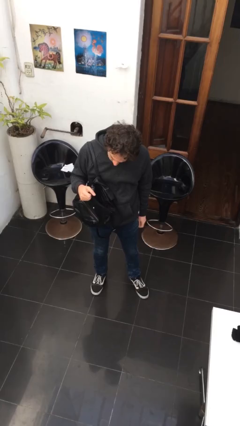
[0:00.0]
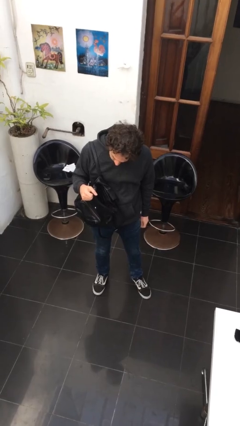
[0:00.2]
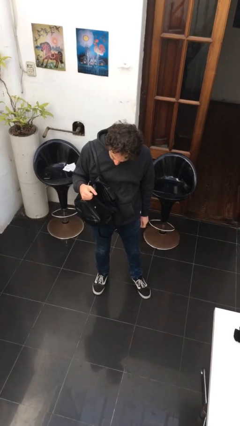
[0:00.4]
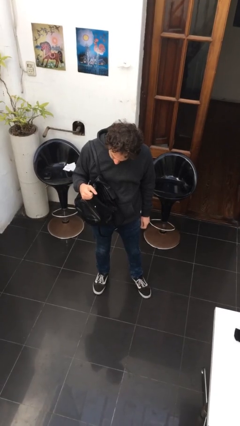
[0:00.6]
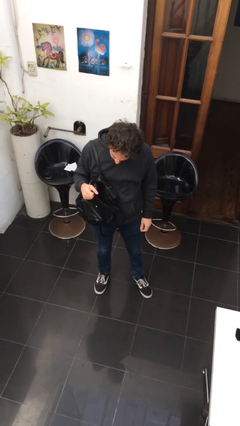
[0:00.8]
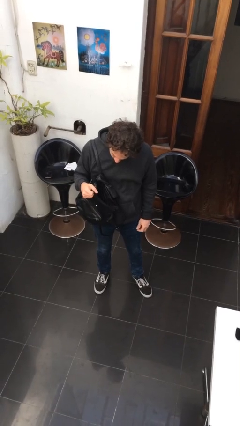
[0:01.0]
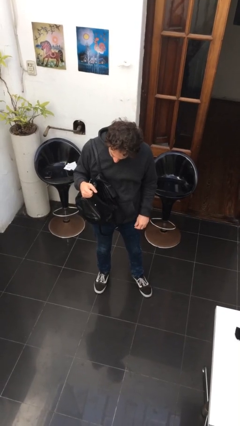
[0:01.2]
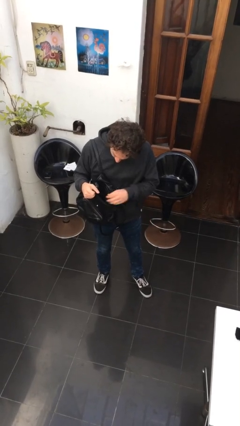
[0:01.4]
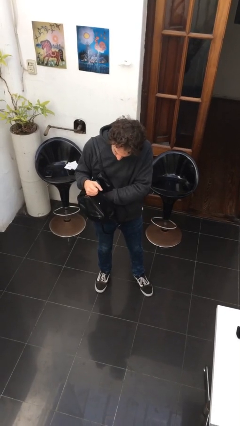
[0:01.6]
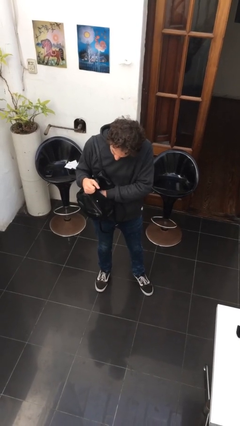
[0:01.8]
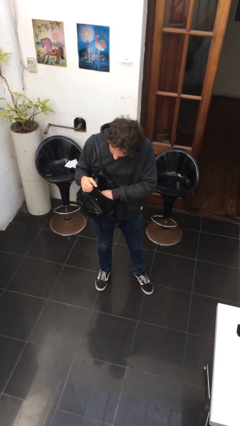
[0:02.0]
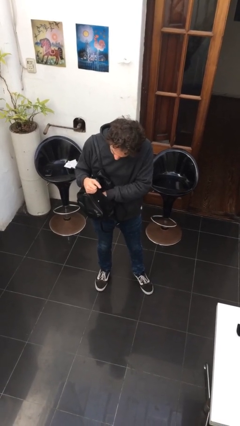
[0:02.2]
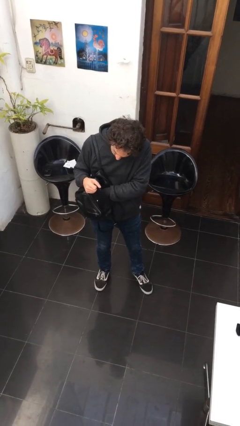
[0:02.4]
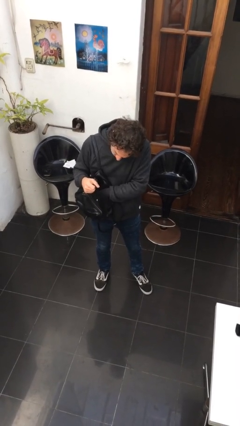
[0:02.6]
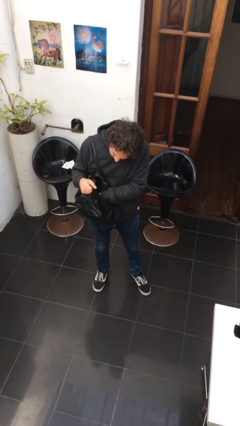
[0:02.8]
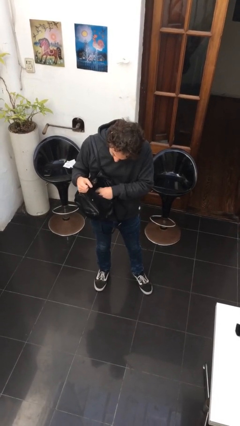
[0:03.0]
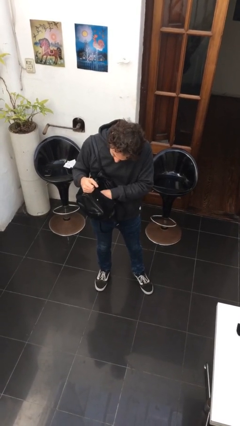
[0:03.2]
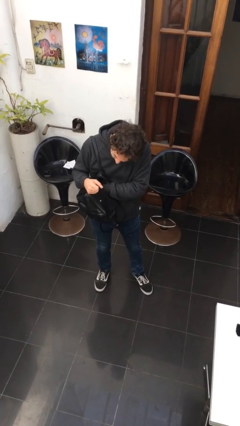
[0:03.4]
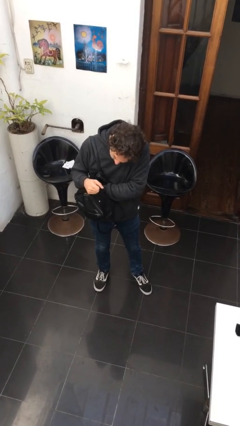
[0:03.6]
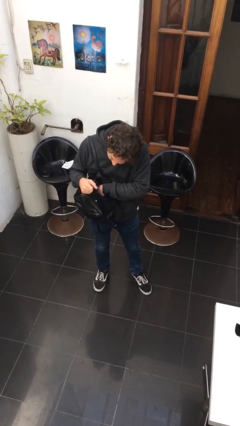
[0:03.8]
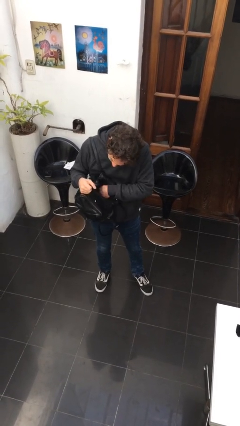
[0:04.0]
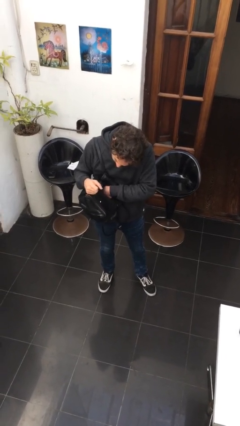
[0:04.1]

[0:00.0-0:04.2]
person searches in purse

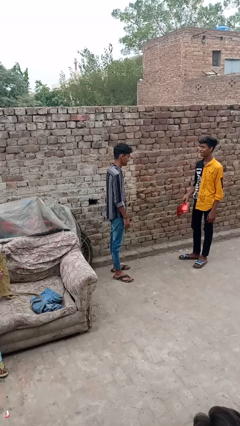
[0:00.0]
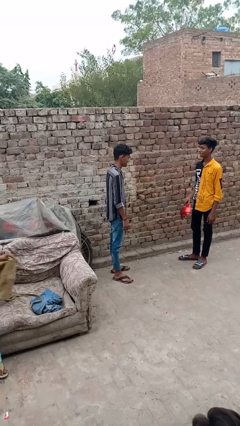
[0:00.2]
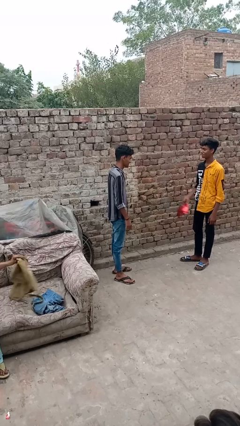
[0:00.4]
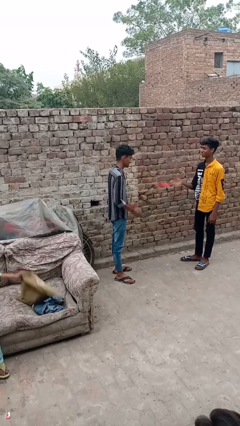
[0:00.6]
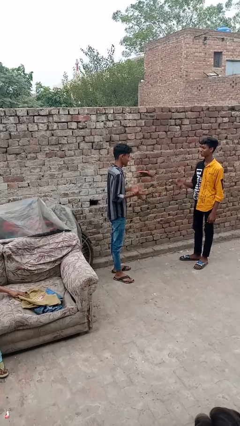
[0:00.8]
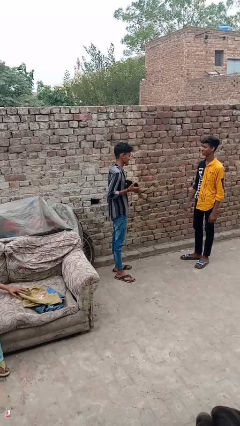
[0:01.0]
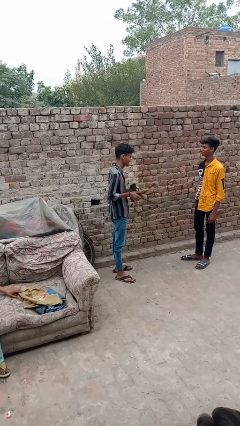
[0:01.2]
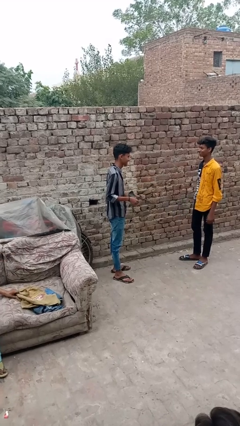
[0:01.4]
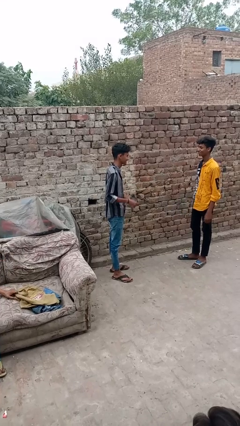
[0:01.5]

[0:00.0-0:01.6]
person catches object from person

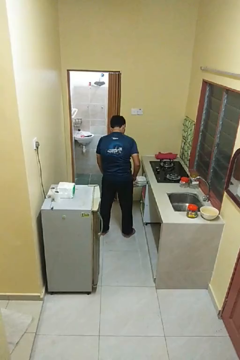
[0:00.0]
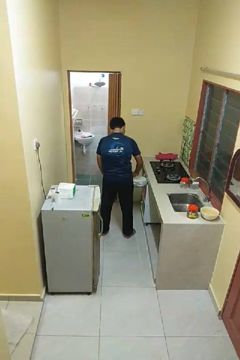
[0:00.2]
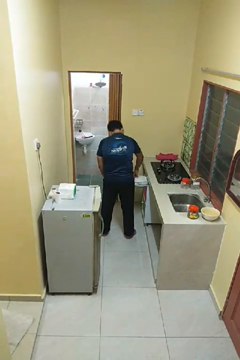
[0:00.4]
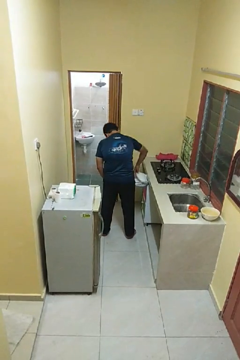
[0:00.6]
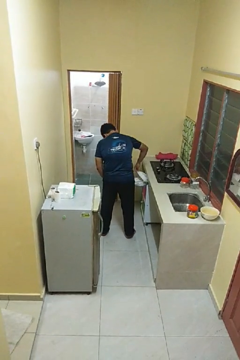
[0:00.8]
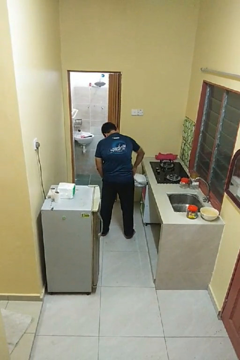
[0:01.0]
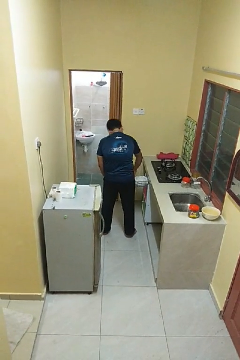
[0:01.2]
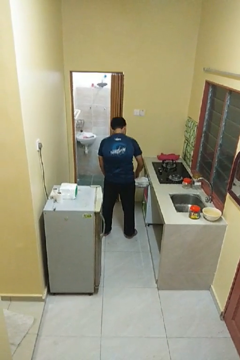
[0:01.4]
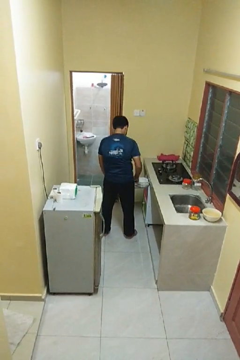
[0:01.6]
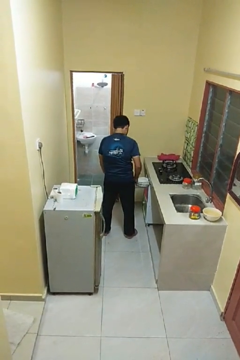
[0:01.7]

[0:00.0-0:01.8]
person searches in kitchen drawer

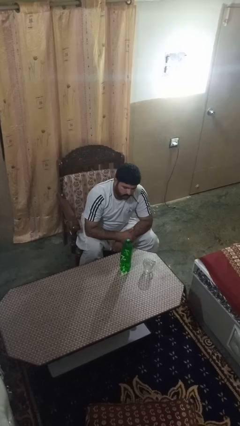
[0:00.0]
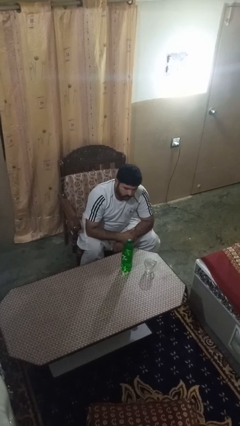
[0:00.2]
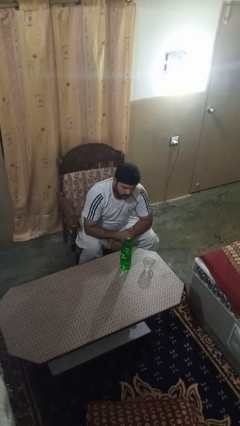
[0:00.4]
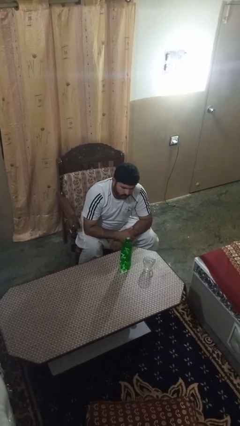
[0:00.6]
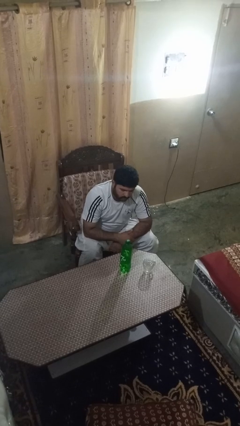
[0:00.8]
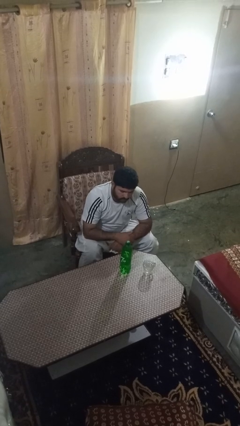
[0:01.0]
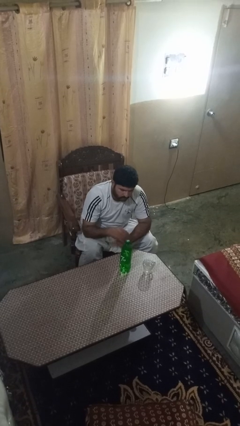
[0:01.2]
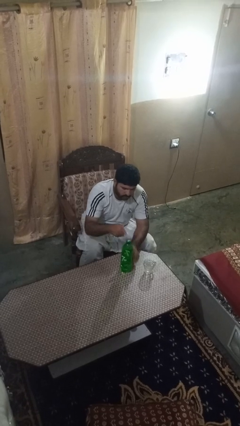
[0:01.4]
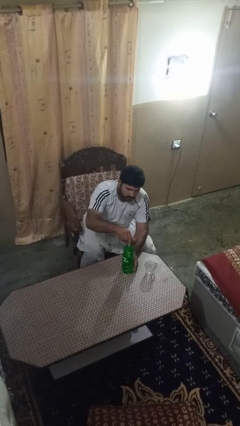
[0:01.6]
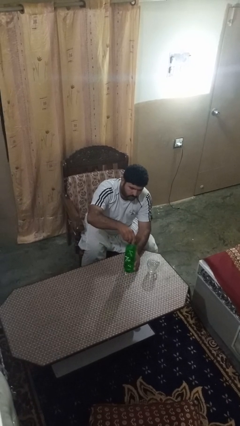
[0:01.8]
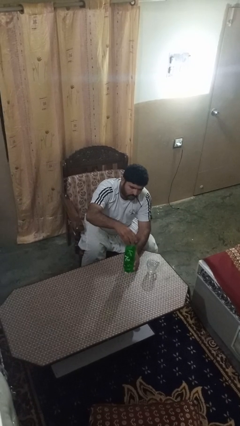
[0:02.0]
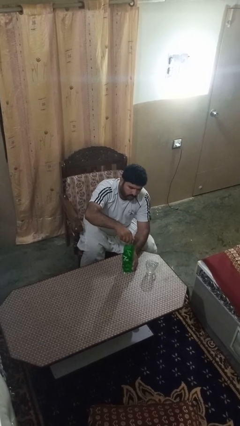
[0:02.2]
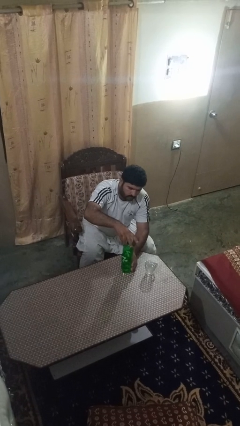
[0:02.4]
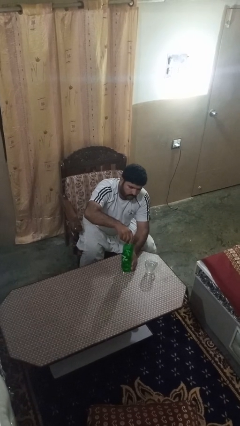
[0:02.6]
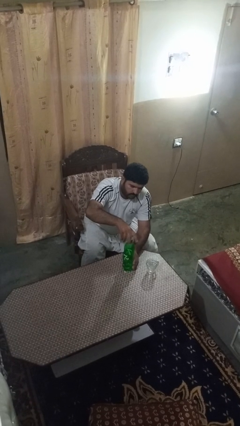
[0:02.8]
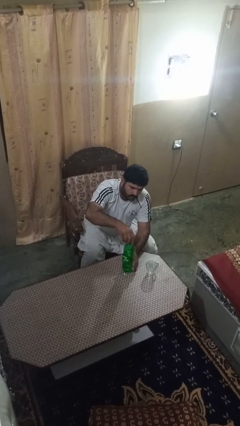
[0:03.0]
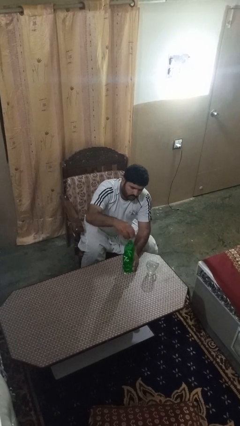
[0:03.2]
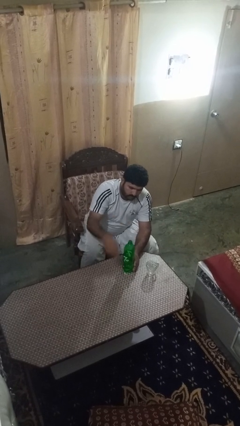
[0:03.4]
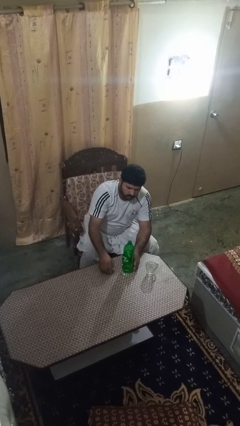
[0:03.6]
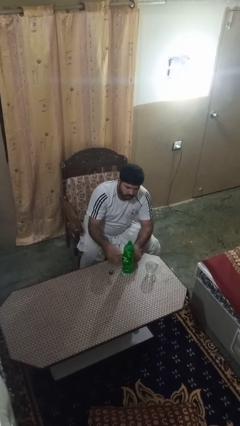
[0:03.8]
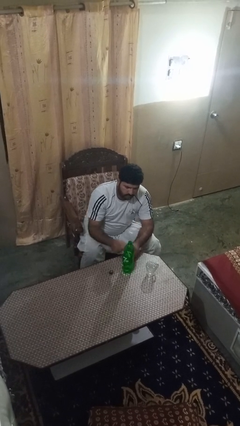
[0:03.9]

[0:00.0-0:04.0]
person unscrews lid from bottle

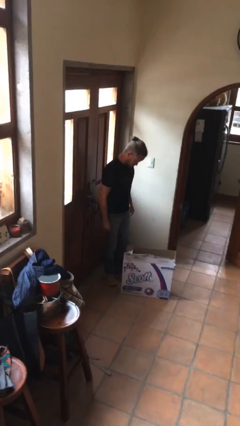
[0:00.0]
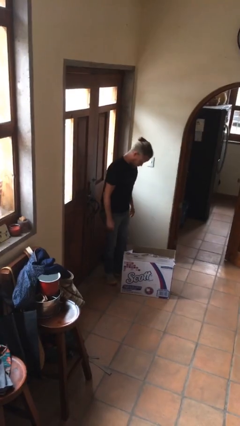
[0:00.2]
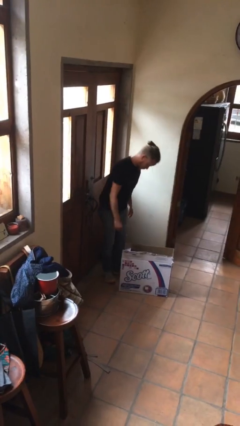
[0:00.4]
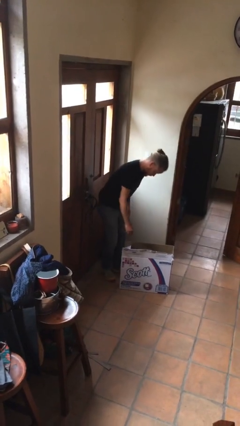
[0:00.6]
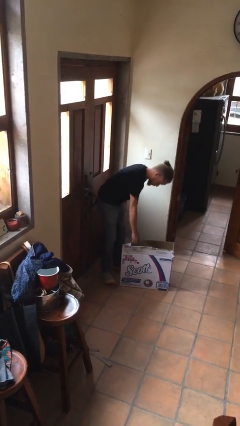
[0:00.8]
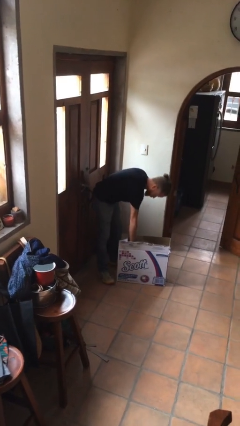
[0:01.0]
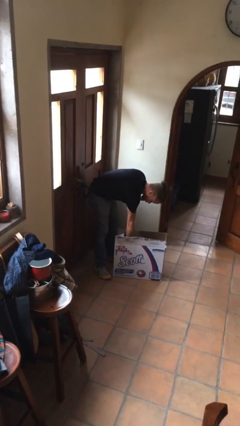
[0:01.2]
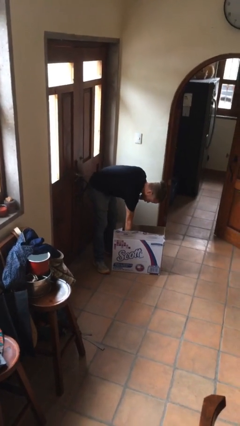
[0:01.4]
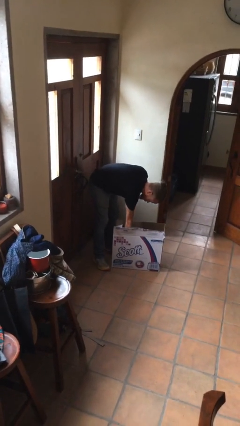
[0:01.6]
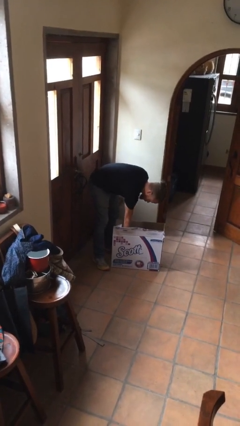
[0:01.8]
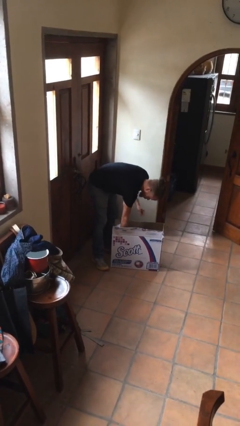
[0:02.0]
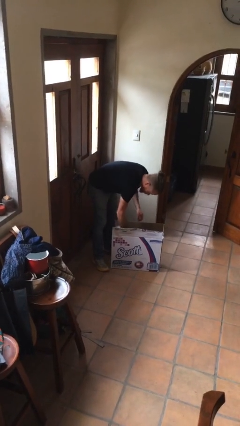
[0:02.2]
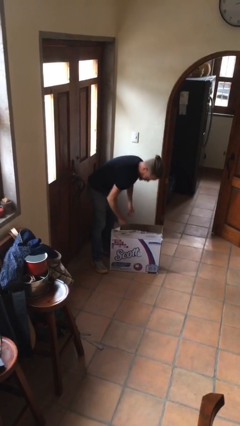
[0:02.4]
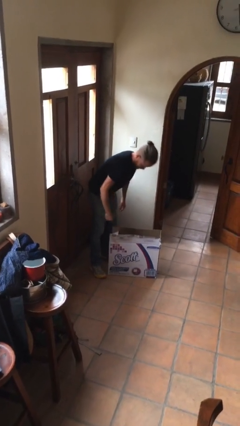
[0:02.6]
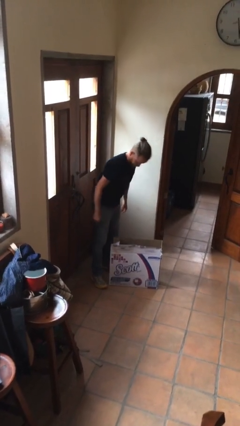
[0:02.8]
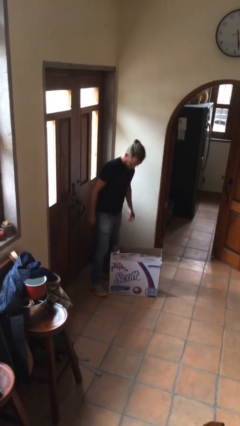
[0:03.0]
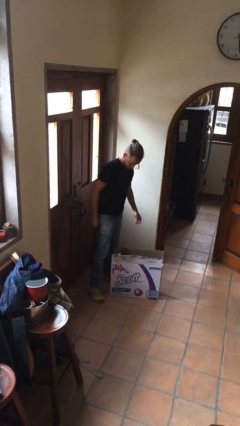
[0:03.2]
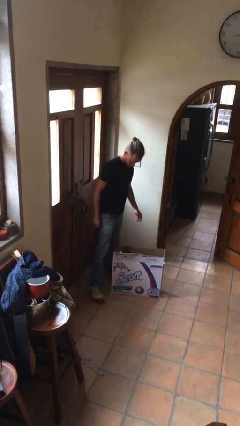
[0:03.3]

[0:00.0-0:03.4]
person searches in box

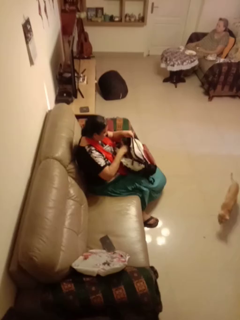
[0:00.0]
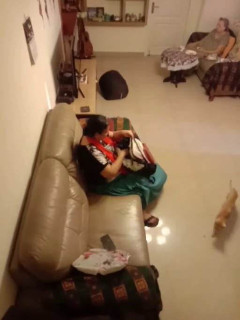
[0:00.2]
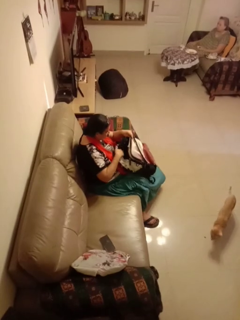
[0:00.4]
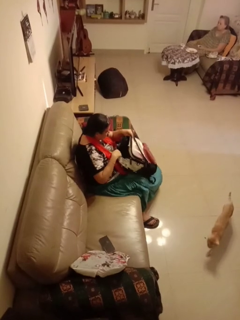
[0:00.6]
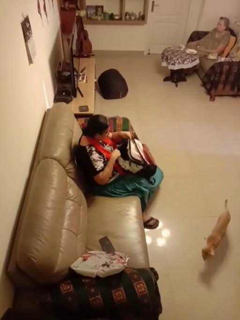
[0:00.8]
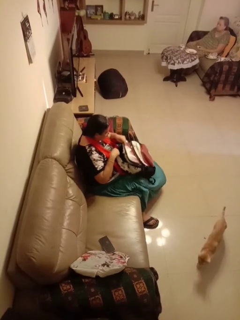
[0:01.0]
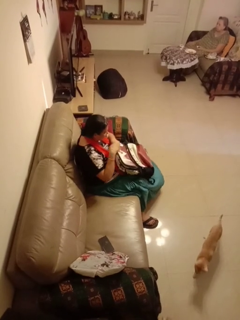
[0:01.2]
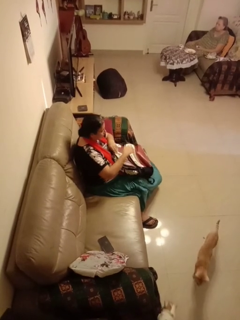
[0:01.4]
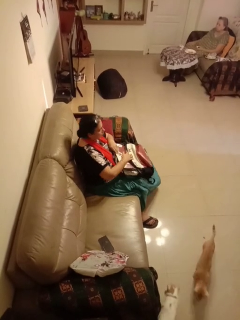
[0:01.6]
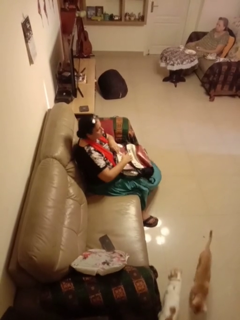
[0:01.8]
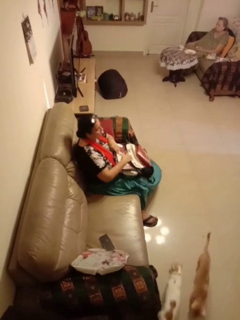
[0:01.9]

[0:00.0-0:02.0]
person puts object into backpack

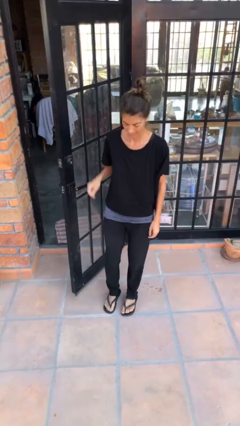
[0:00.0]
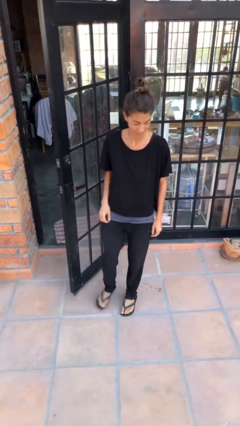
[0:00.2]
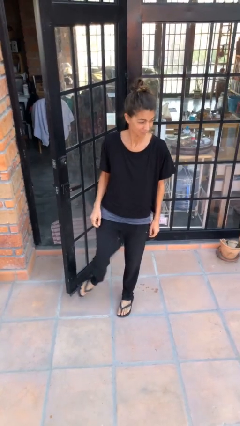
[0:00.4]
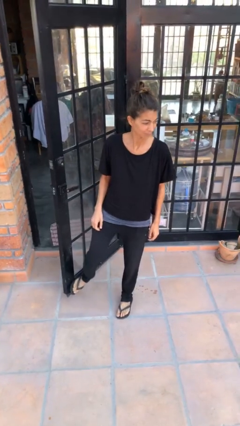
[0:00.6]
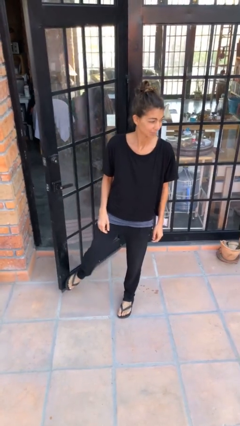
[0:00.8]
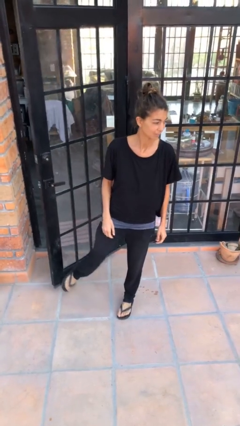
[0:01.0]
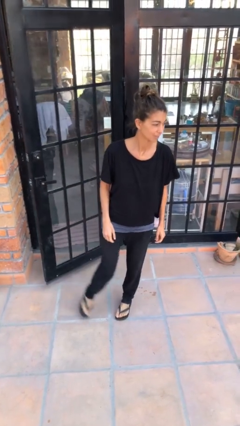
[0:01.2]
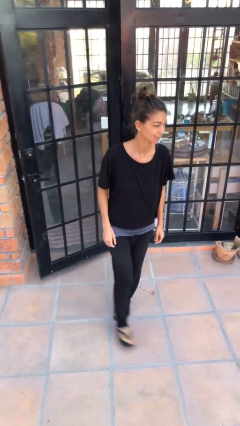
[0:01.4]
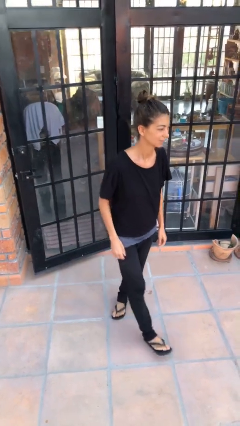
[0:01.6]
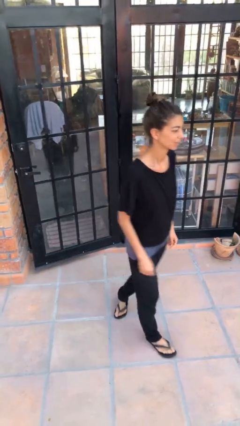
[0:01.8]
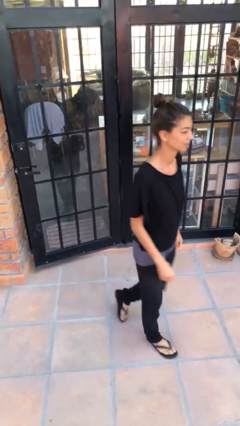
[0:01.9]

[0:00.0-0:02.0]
person closes door with foot
